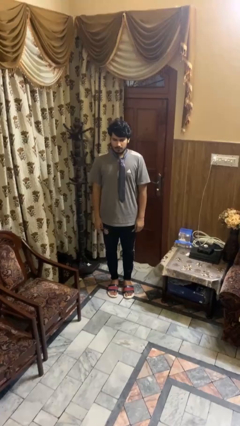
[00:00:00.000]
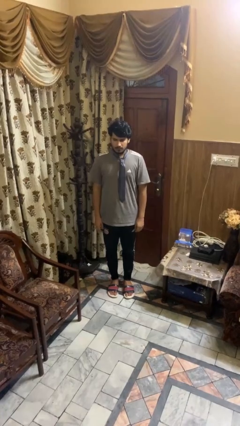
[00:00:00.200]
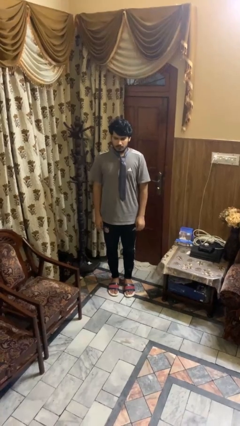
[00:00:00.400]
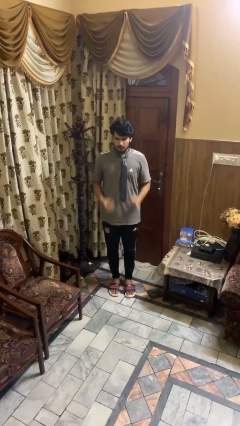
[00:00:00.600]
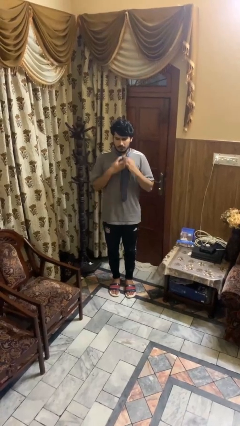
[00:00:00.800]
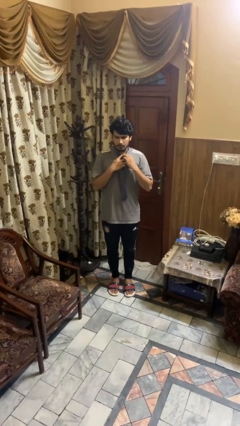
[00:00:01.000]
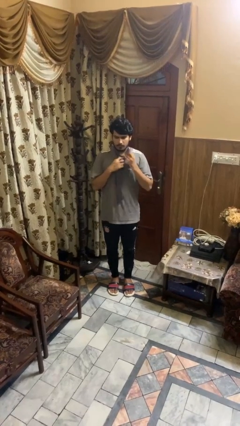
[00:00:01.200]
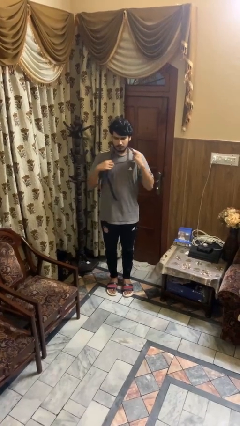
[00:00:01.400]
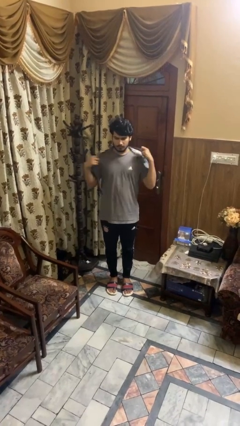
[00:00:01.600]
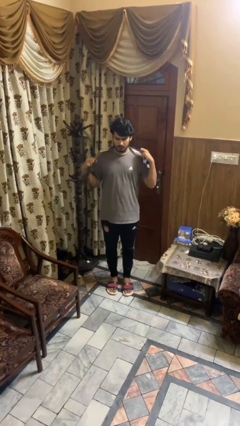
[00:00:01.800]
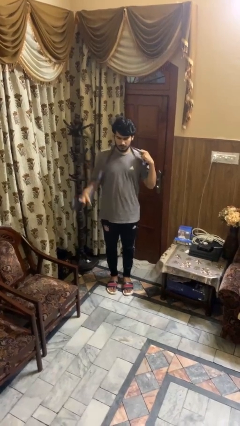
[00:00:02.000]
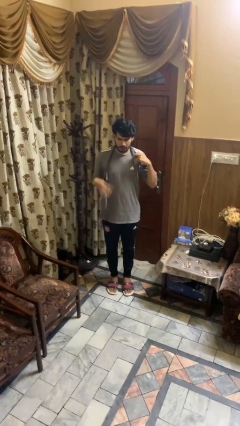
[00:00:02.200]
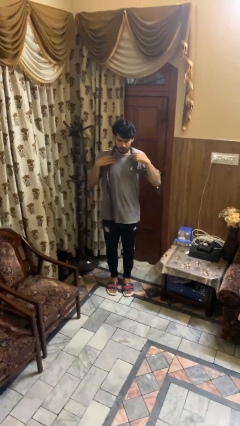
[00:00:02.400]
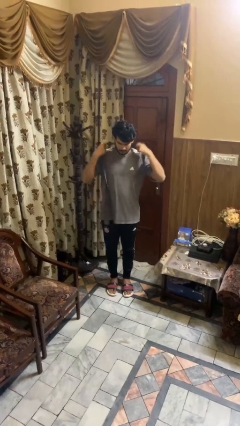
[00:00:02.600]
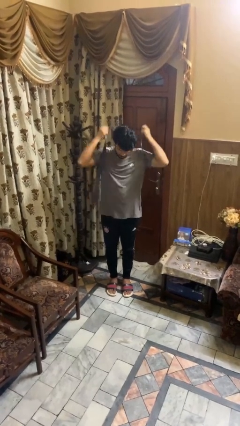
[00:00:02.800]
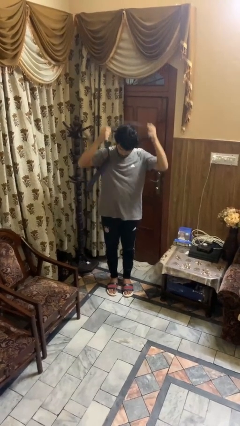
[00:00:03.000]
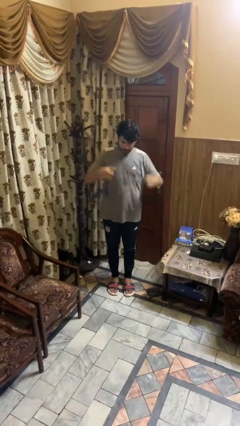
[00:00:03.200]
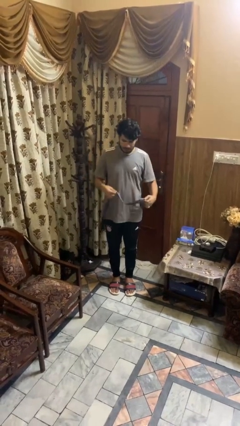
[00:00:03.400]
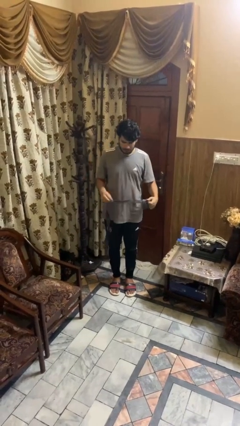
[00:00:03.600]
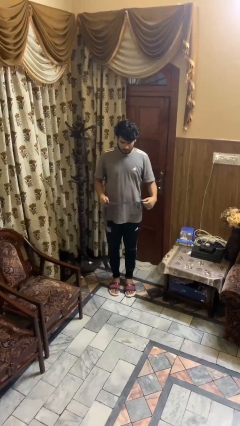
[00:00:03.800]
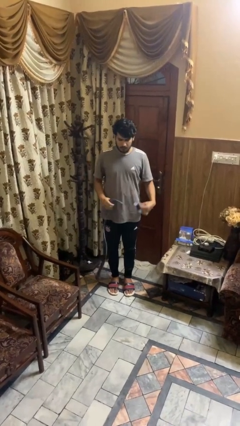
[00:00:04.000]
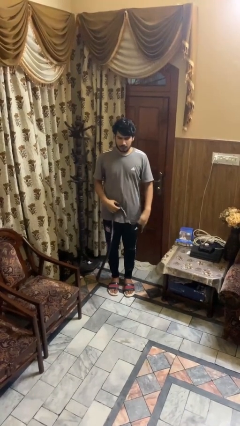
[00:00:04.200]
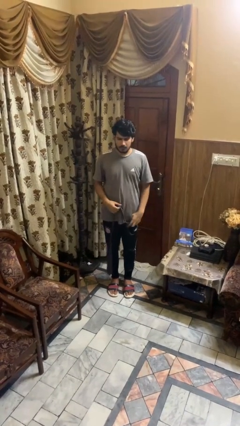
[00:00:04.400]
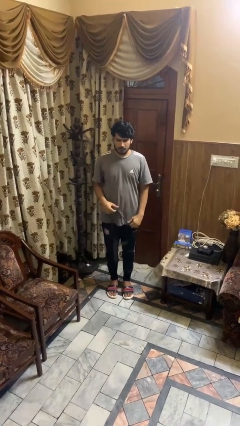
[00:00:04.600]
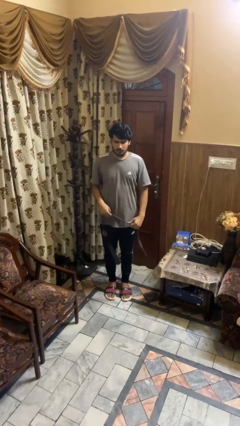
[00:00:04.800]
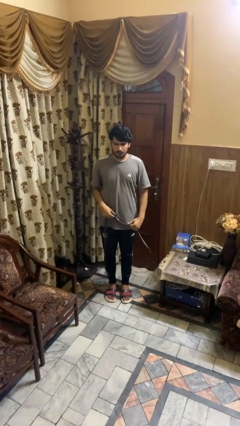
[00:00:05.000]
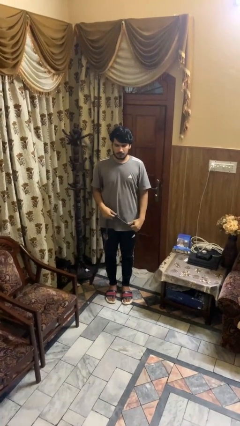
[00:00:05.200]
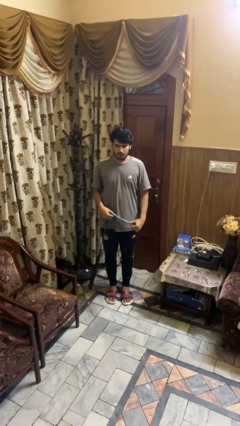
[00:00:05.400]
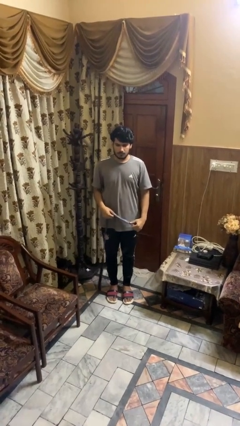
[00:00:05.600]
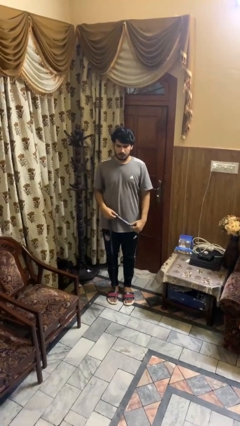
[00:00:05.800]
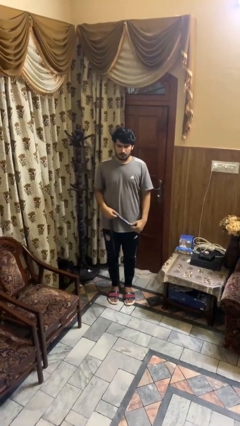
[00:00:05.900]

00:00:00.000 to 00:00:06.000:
person takes off necktie

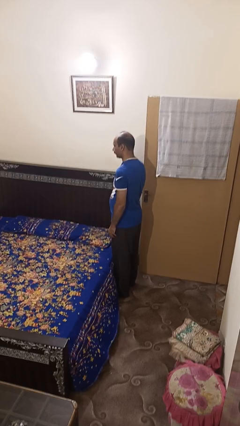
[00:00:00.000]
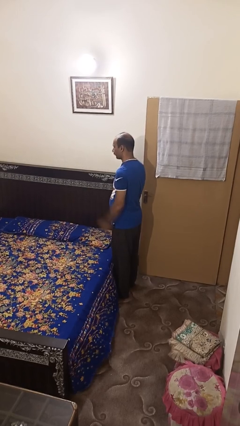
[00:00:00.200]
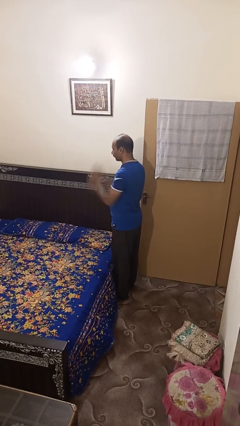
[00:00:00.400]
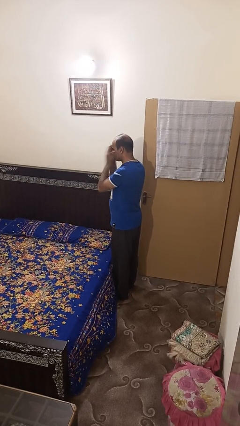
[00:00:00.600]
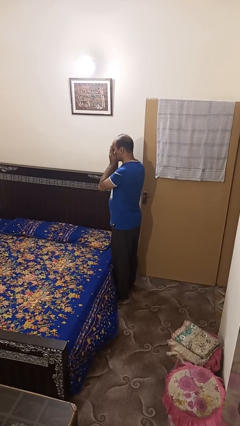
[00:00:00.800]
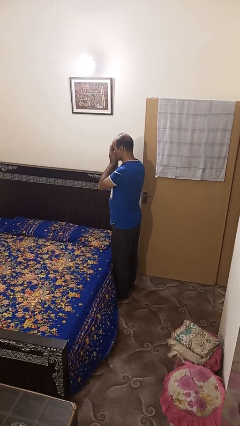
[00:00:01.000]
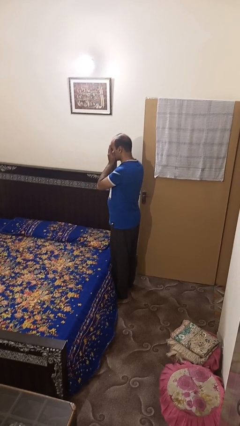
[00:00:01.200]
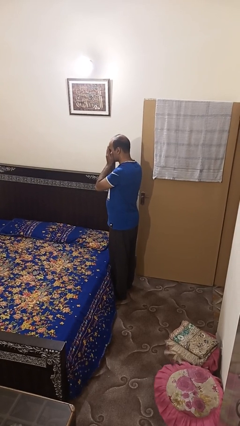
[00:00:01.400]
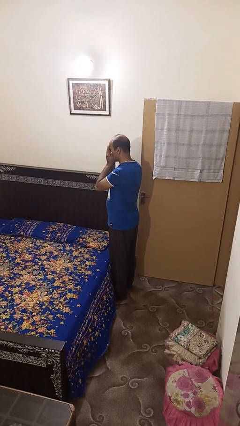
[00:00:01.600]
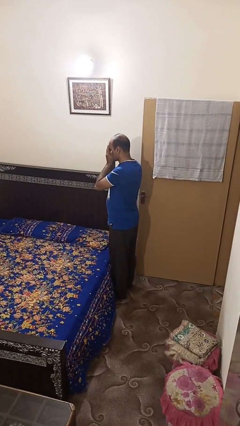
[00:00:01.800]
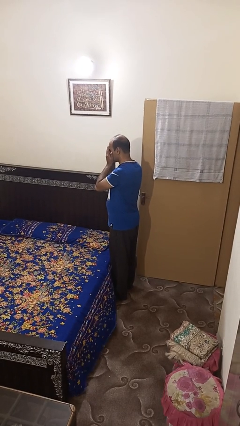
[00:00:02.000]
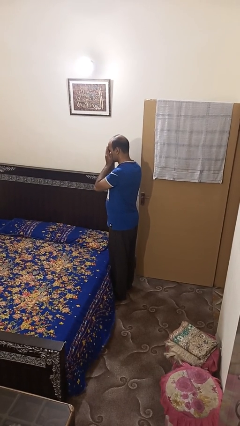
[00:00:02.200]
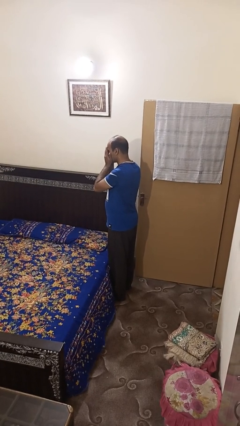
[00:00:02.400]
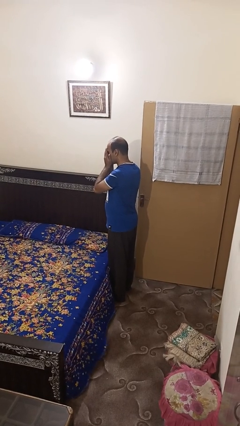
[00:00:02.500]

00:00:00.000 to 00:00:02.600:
person covers face with hands

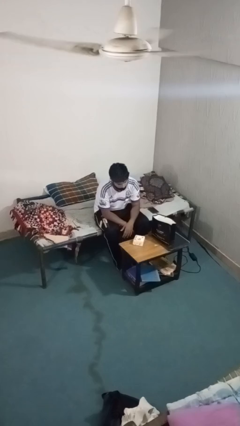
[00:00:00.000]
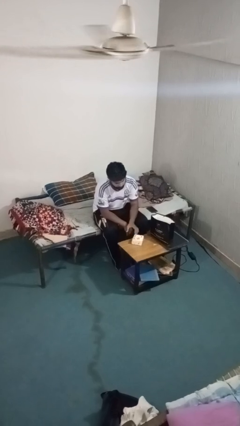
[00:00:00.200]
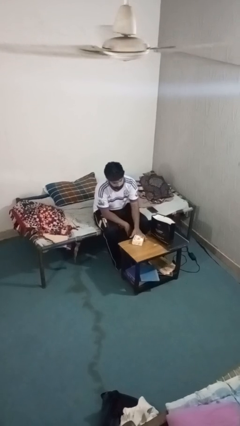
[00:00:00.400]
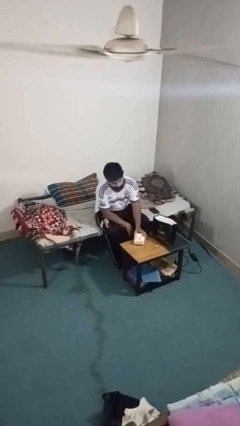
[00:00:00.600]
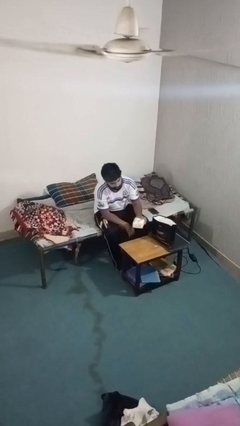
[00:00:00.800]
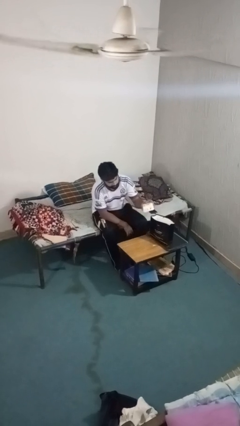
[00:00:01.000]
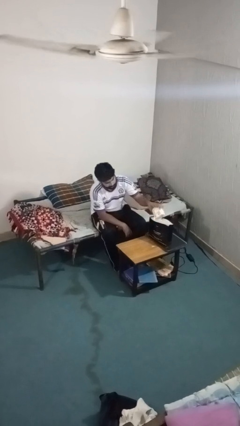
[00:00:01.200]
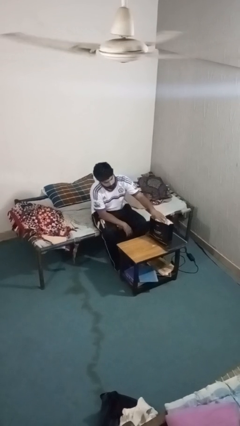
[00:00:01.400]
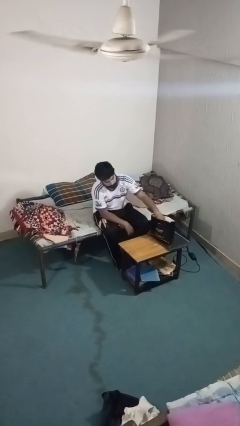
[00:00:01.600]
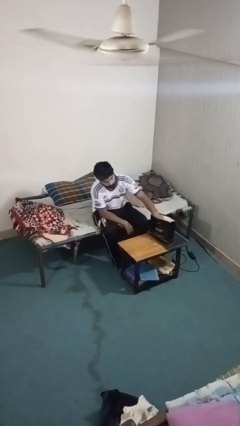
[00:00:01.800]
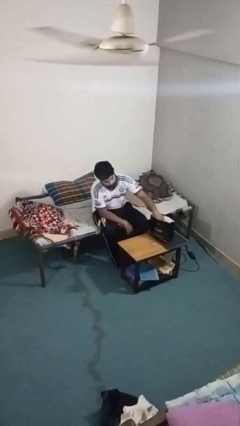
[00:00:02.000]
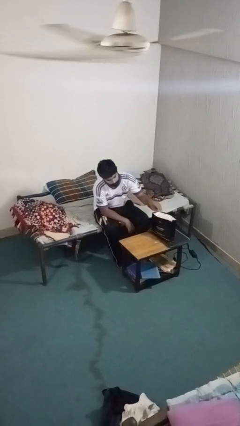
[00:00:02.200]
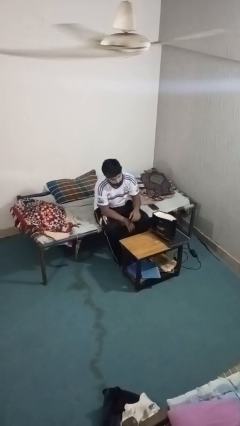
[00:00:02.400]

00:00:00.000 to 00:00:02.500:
person puts object into bag

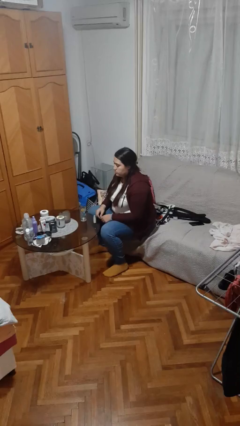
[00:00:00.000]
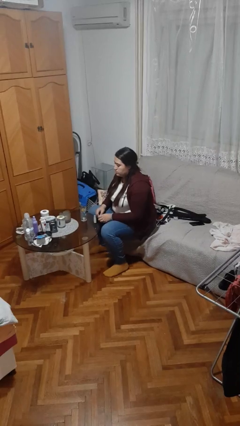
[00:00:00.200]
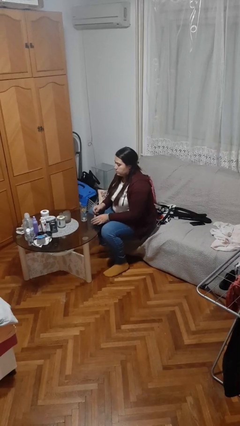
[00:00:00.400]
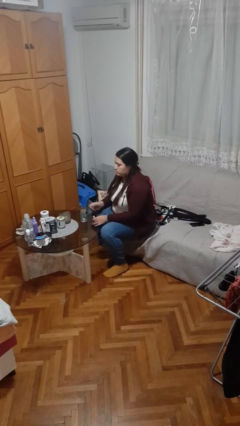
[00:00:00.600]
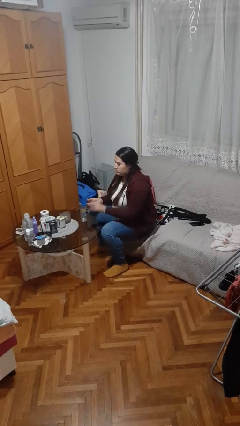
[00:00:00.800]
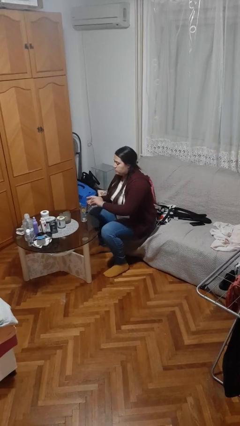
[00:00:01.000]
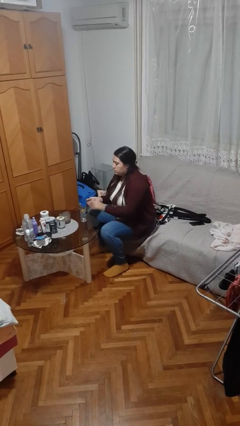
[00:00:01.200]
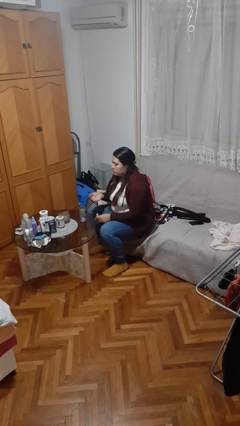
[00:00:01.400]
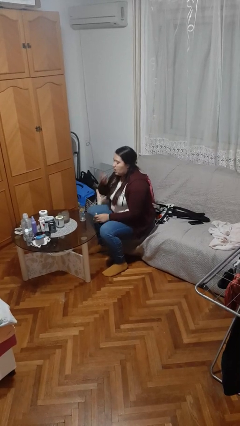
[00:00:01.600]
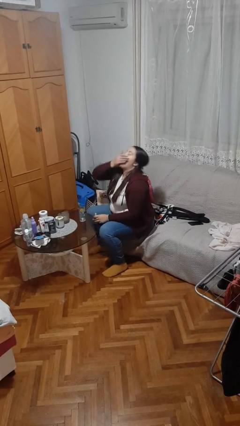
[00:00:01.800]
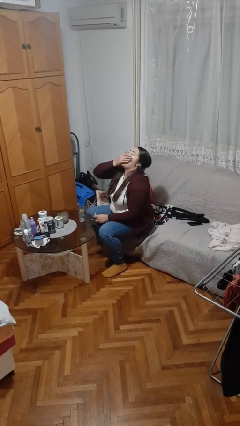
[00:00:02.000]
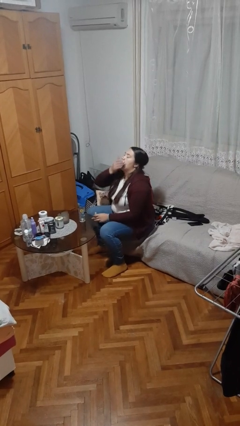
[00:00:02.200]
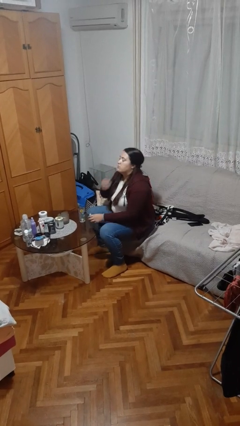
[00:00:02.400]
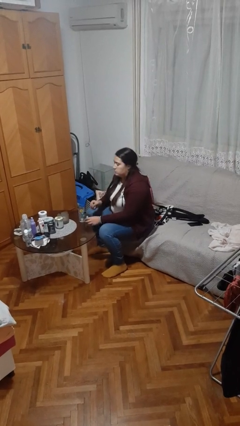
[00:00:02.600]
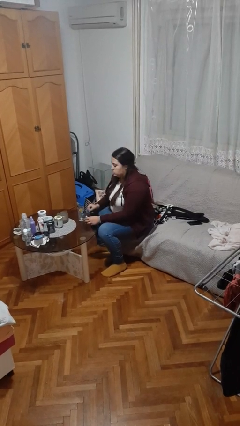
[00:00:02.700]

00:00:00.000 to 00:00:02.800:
person takes medicine pills

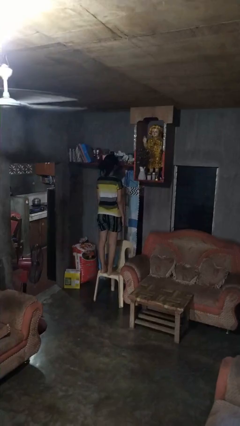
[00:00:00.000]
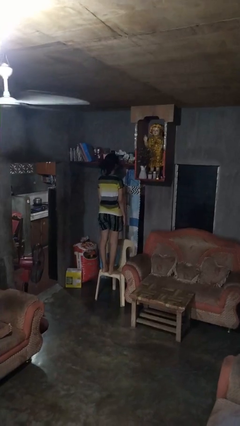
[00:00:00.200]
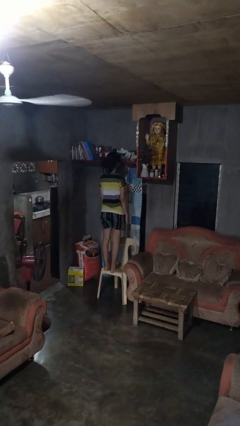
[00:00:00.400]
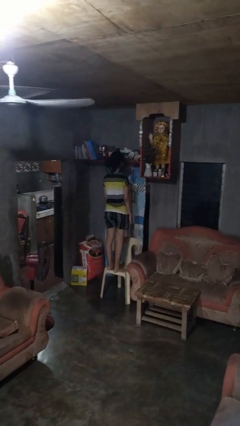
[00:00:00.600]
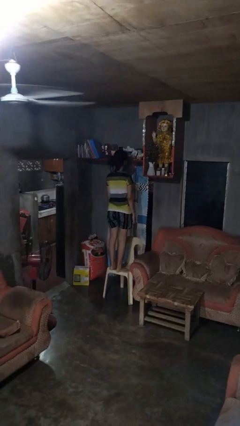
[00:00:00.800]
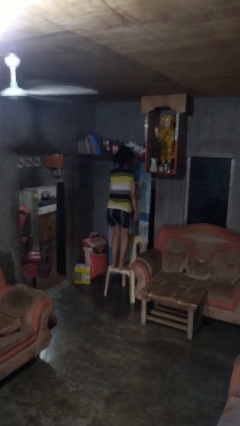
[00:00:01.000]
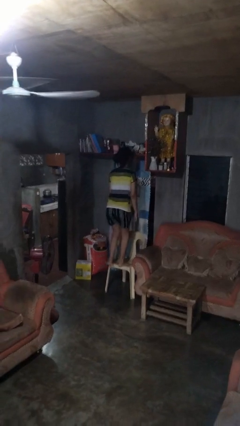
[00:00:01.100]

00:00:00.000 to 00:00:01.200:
person climbs off chair

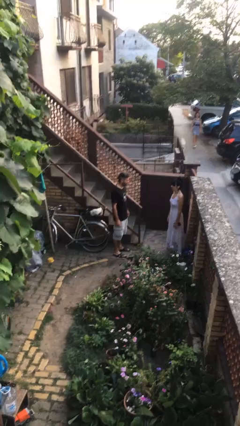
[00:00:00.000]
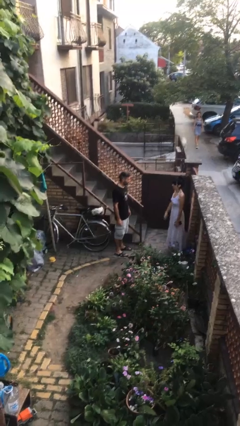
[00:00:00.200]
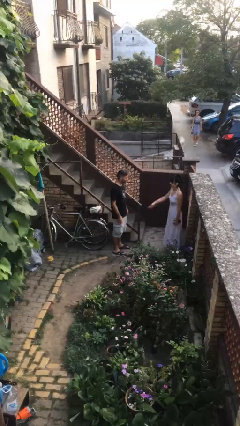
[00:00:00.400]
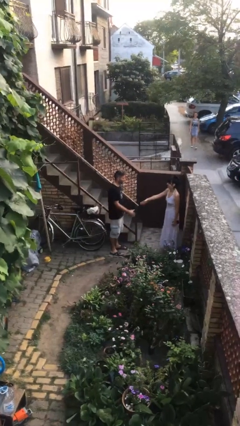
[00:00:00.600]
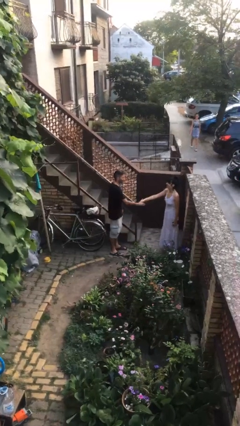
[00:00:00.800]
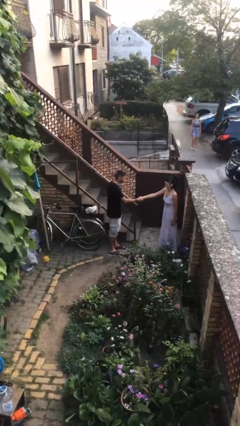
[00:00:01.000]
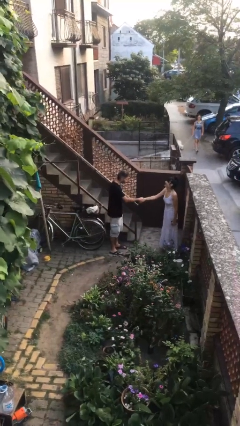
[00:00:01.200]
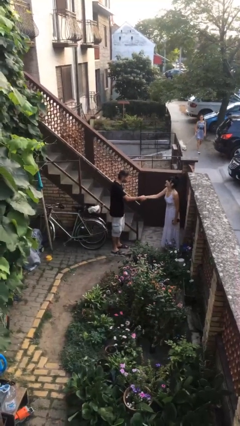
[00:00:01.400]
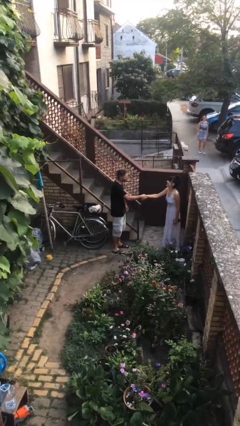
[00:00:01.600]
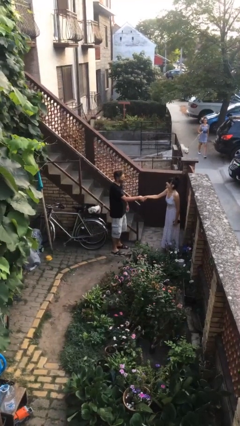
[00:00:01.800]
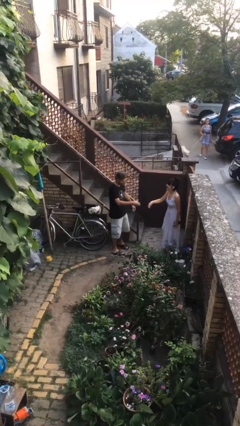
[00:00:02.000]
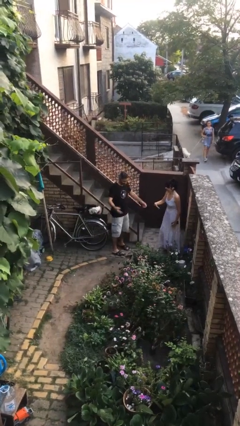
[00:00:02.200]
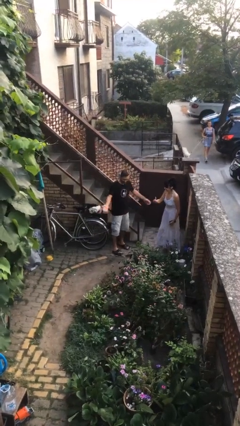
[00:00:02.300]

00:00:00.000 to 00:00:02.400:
person shakes hand
